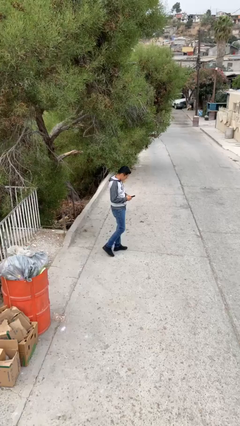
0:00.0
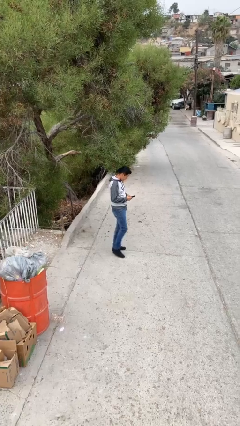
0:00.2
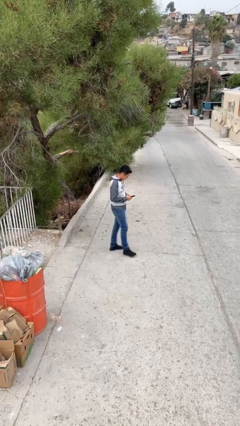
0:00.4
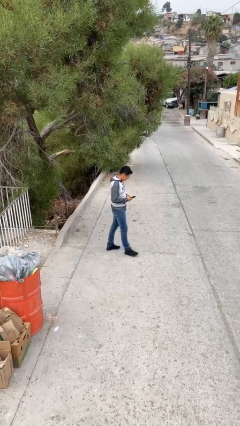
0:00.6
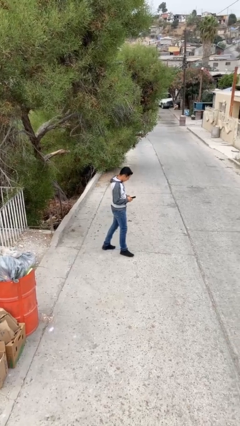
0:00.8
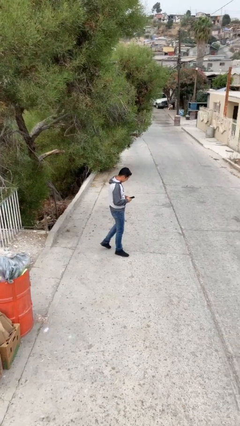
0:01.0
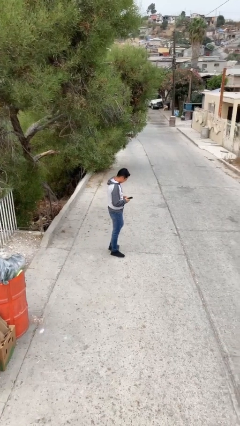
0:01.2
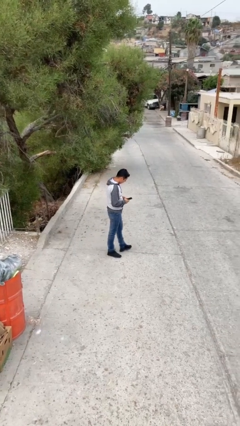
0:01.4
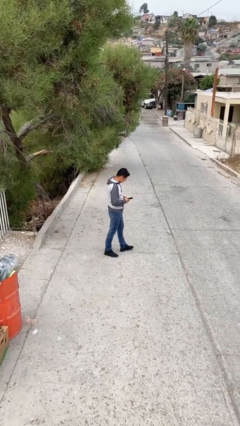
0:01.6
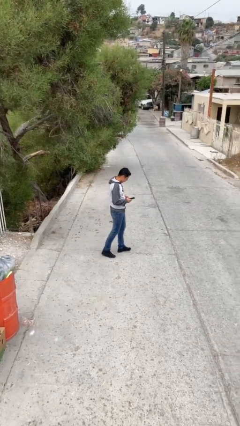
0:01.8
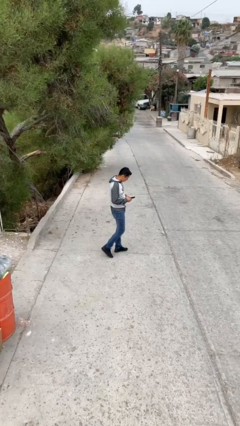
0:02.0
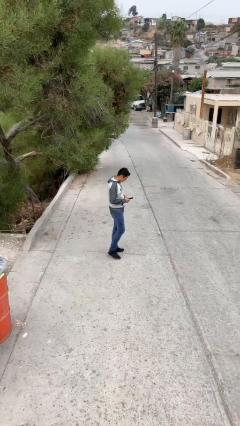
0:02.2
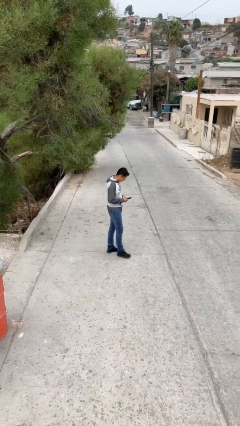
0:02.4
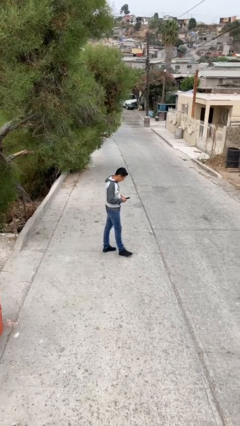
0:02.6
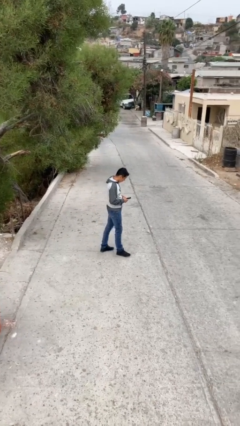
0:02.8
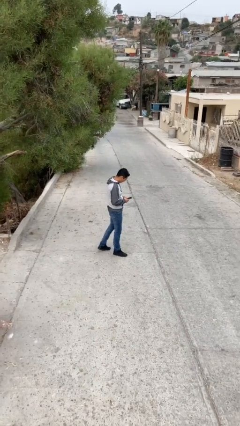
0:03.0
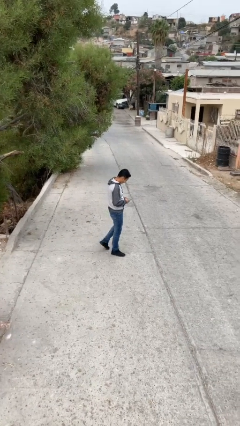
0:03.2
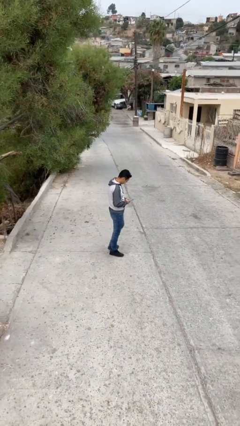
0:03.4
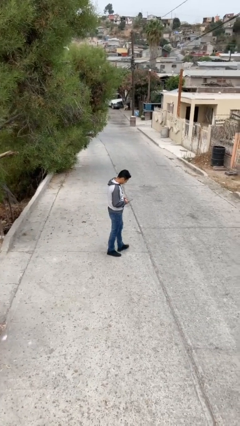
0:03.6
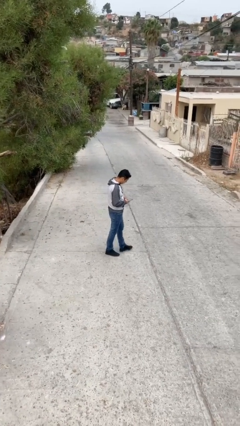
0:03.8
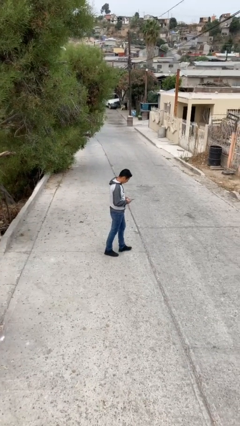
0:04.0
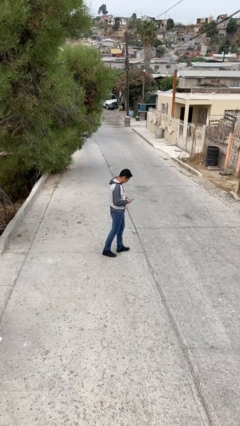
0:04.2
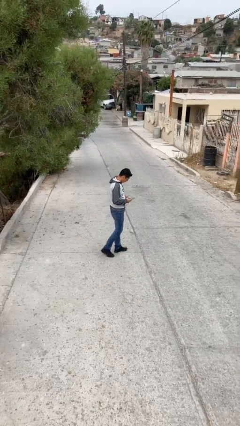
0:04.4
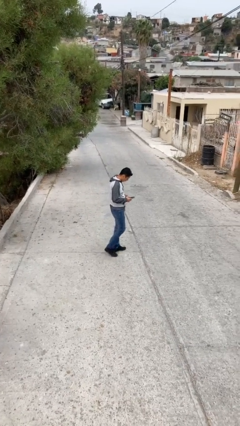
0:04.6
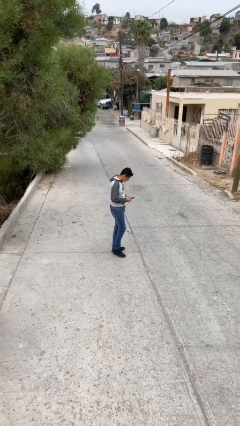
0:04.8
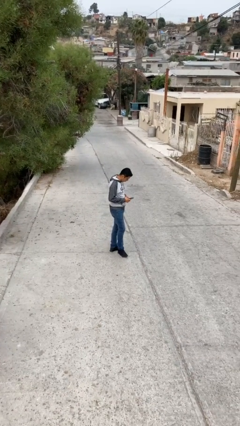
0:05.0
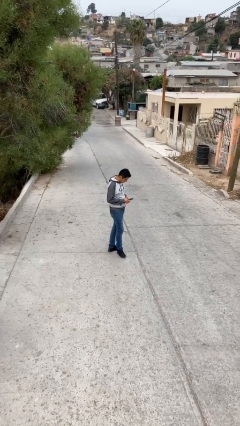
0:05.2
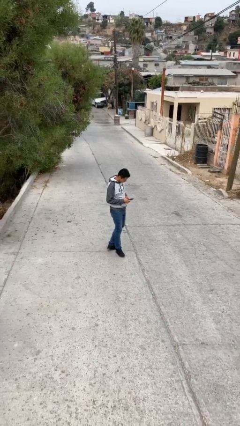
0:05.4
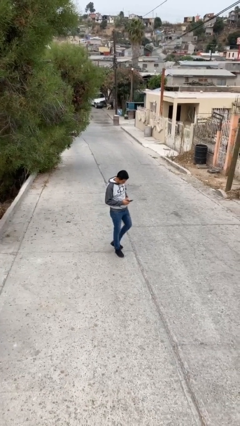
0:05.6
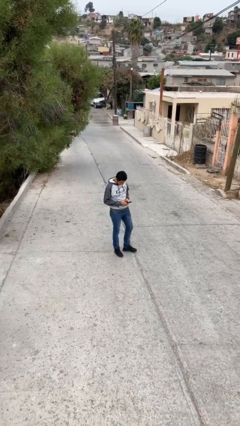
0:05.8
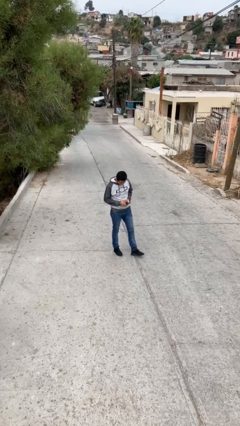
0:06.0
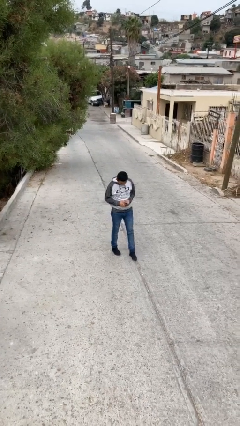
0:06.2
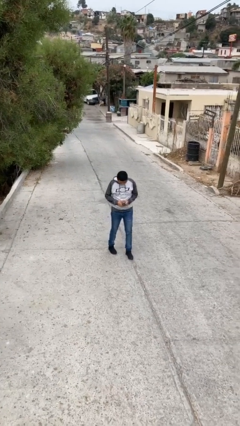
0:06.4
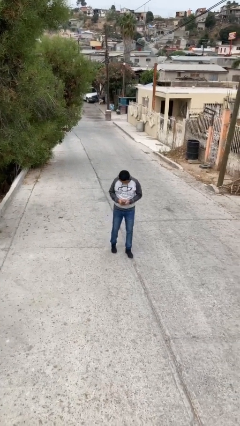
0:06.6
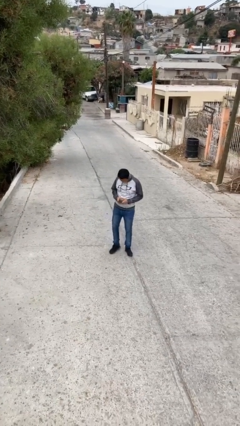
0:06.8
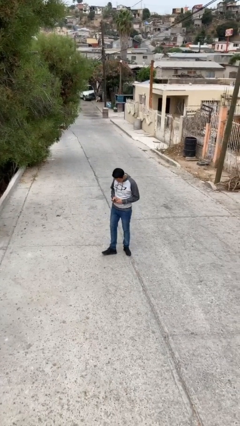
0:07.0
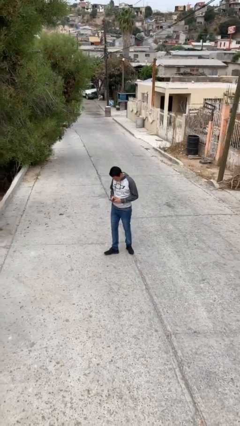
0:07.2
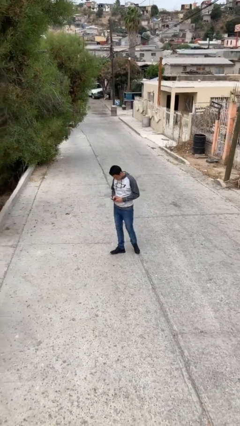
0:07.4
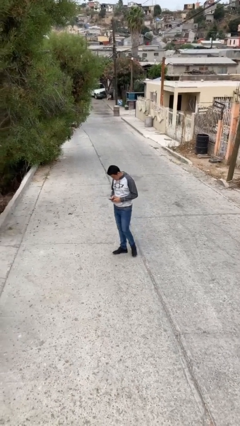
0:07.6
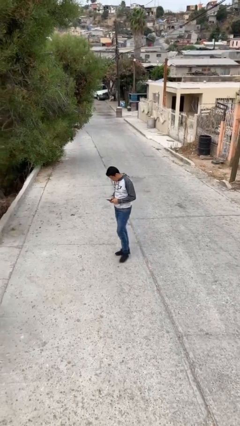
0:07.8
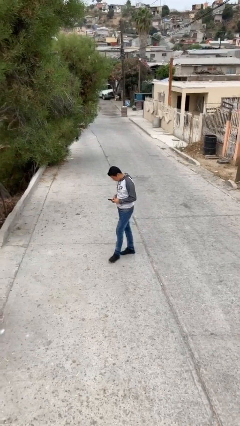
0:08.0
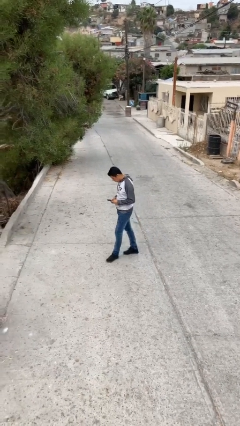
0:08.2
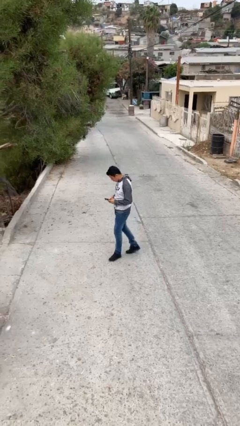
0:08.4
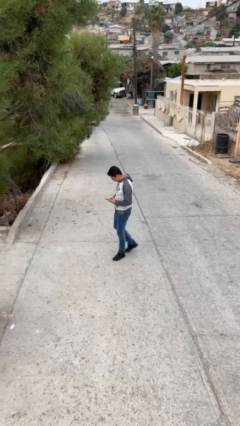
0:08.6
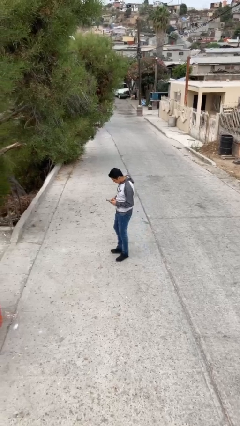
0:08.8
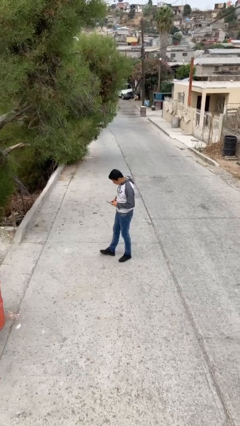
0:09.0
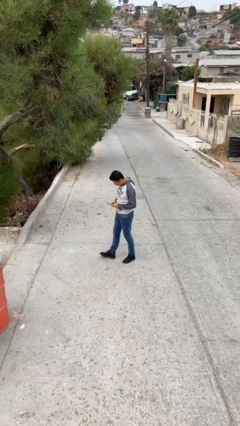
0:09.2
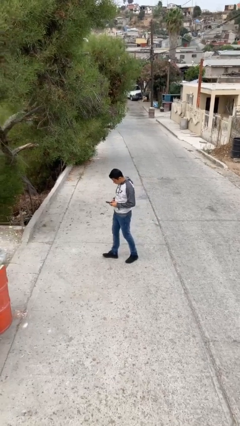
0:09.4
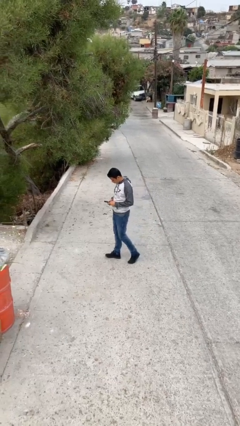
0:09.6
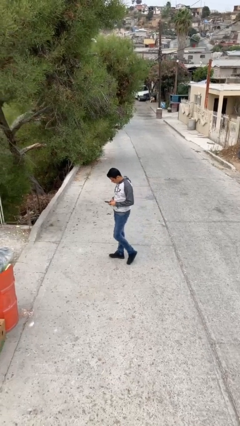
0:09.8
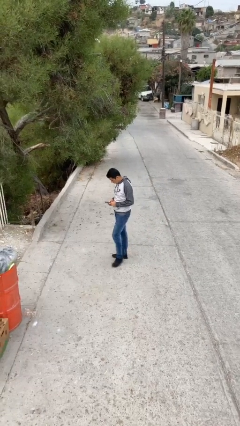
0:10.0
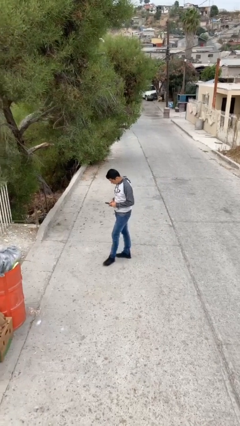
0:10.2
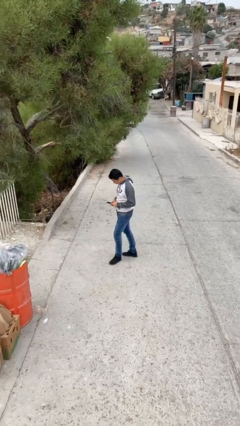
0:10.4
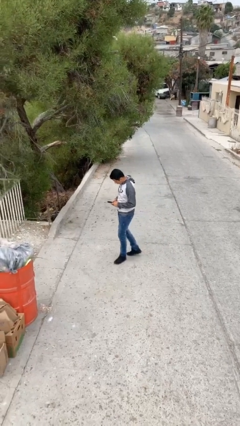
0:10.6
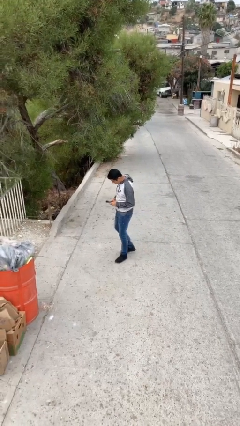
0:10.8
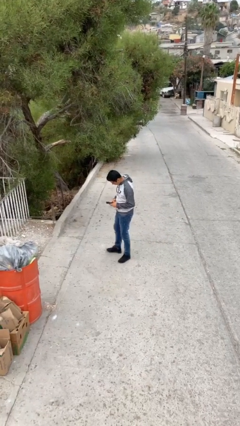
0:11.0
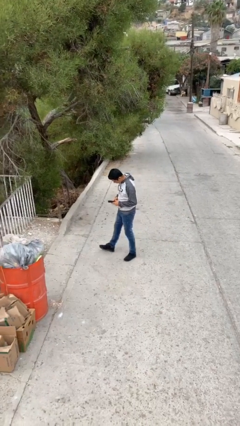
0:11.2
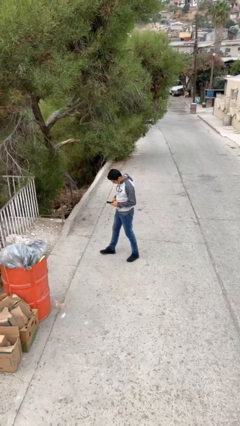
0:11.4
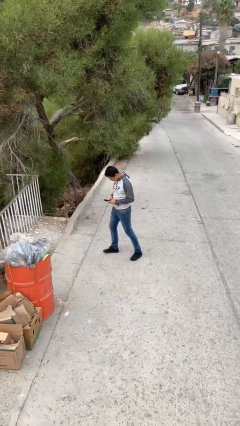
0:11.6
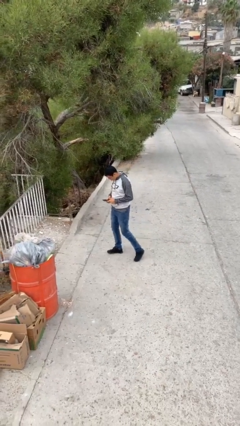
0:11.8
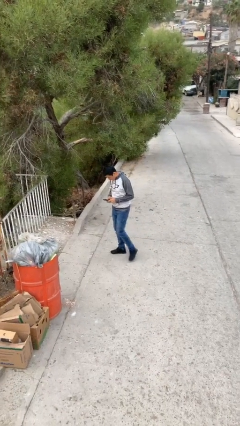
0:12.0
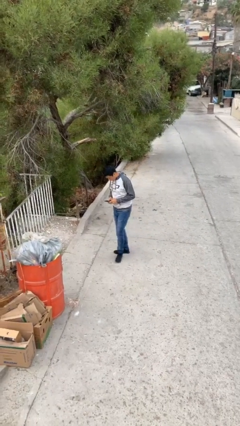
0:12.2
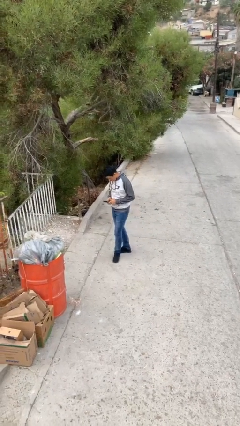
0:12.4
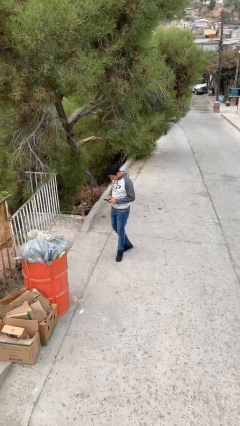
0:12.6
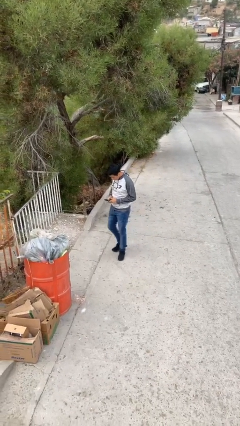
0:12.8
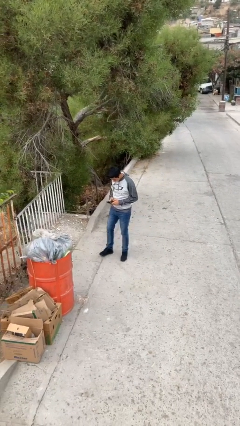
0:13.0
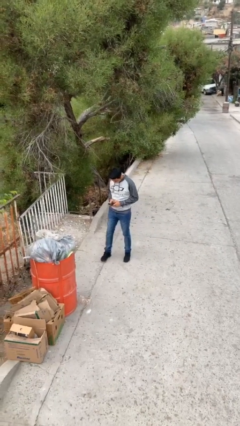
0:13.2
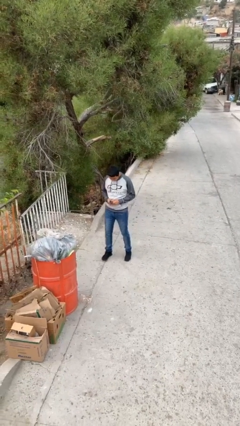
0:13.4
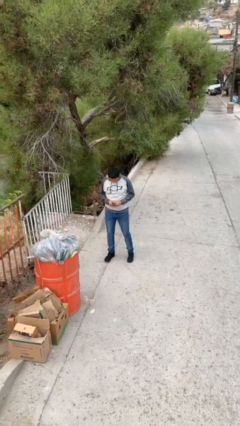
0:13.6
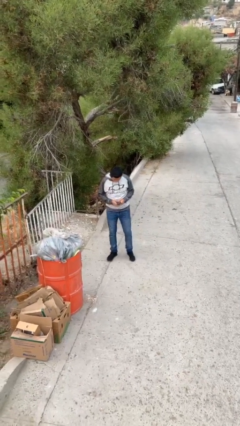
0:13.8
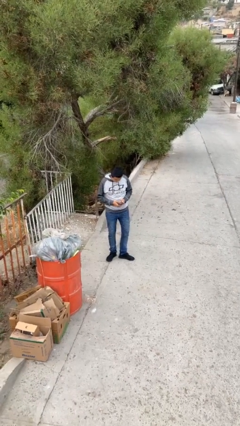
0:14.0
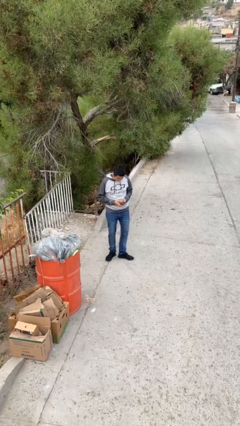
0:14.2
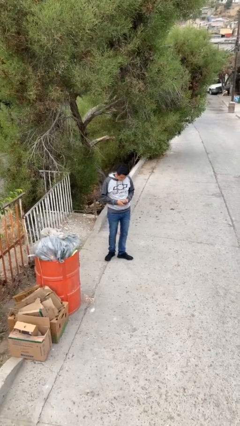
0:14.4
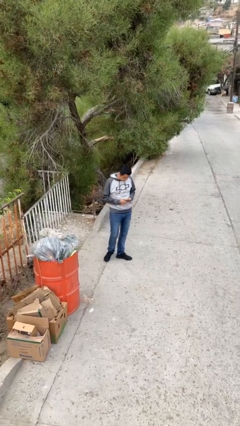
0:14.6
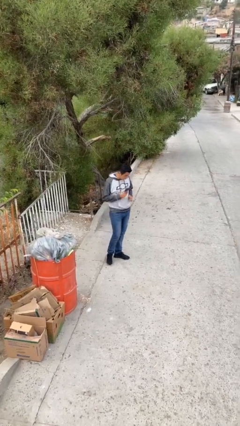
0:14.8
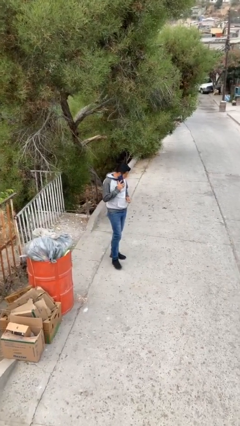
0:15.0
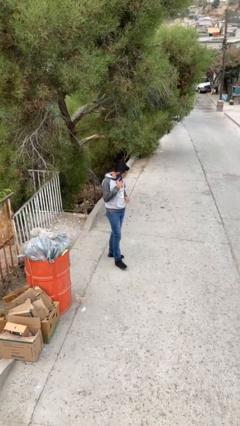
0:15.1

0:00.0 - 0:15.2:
person texts on phone

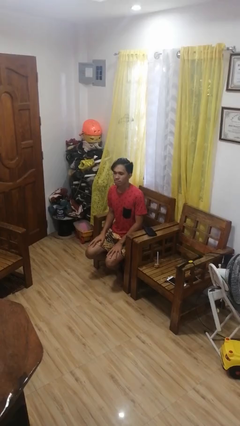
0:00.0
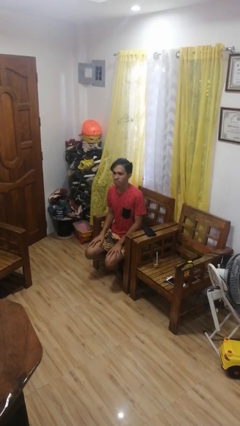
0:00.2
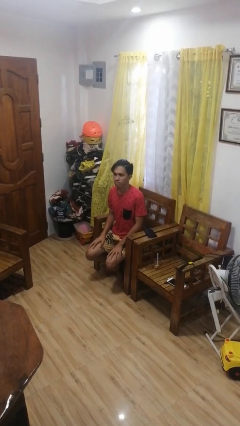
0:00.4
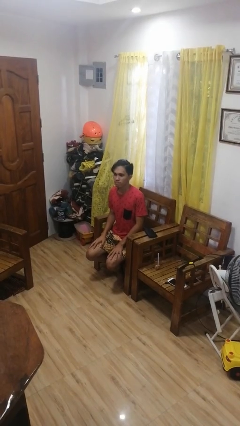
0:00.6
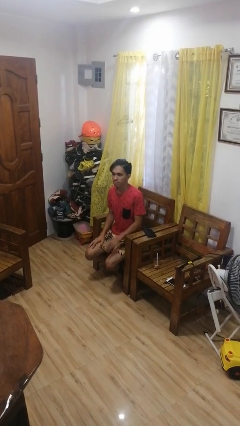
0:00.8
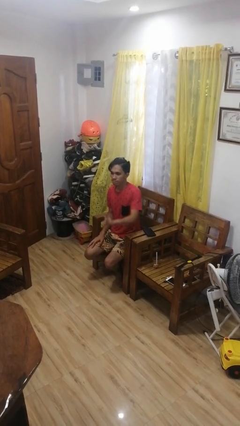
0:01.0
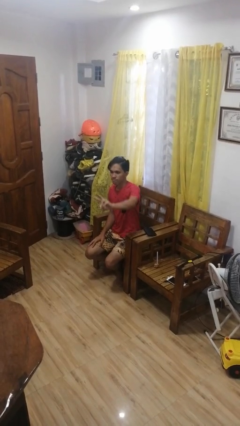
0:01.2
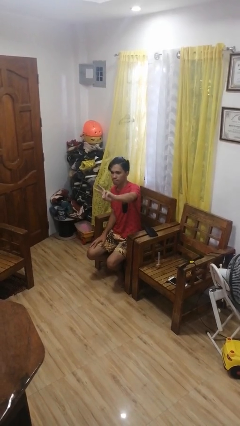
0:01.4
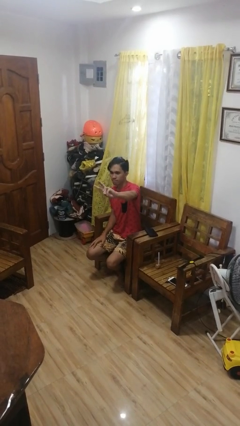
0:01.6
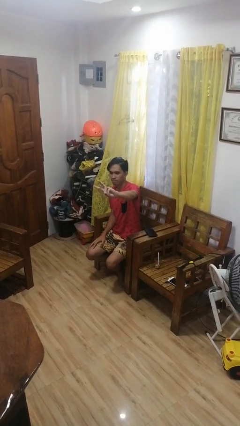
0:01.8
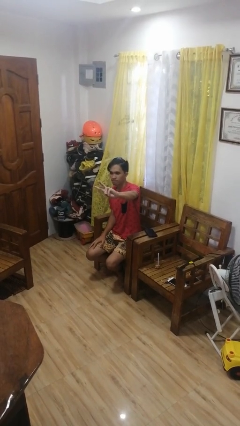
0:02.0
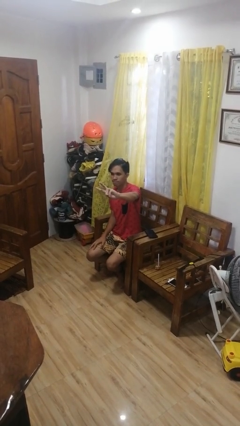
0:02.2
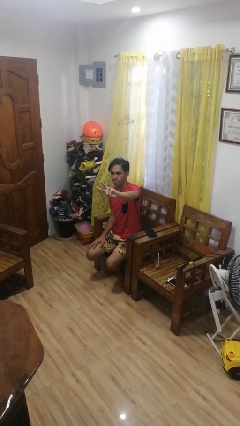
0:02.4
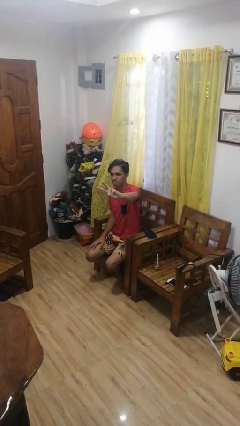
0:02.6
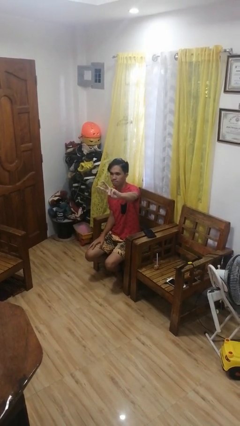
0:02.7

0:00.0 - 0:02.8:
person gestures peace

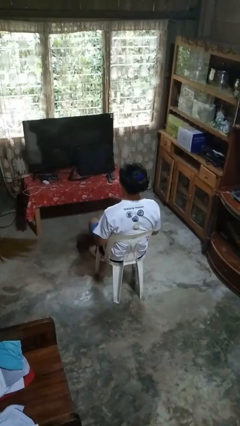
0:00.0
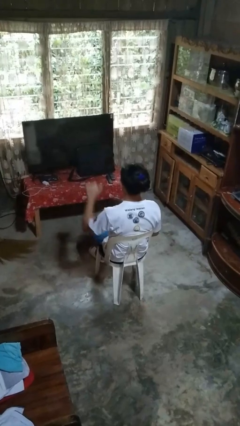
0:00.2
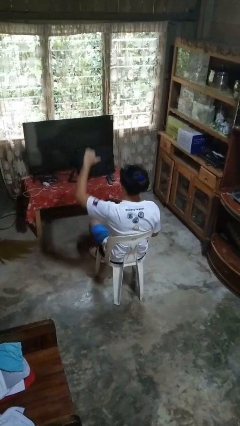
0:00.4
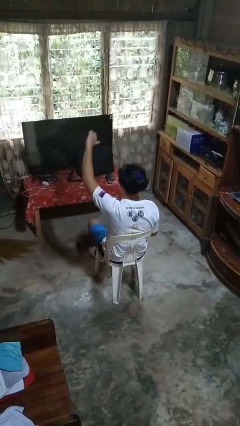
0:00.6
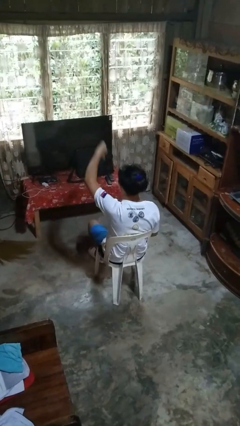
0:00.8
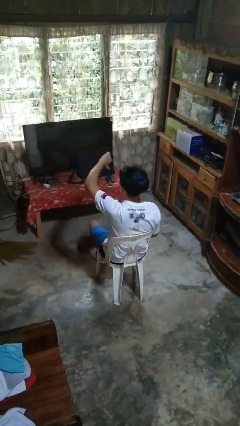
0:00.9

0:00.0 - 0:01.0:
person gestures thumbs down
